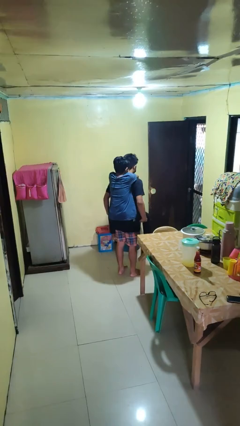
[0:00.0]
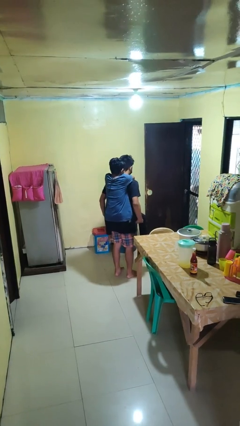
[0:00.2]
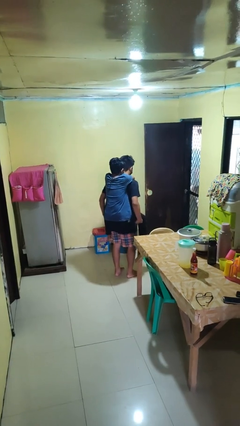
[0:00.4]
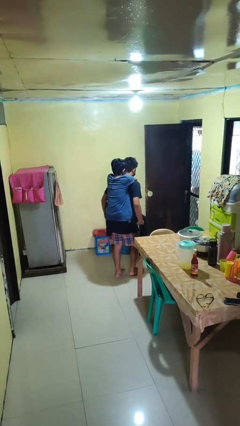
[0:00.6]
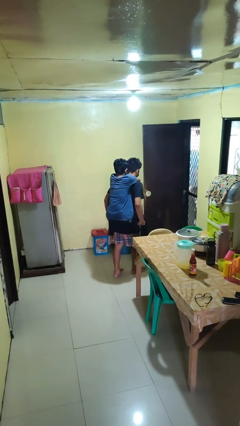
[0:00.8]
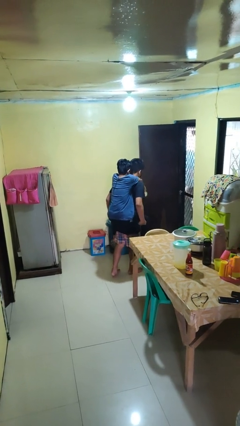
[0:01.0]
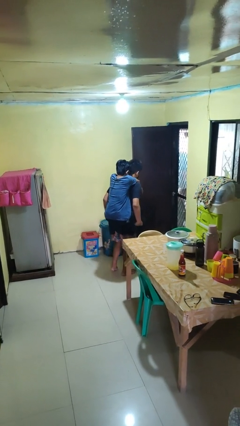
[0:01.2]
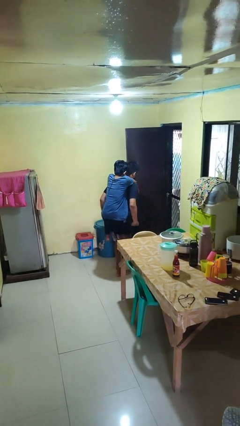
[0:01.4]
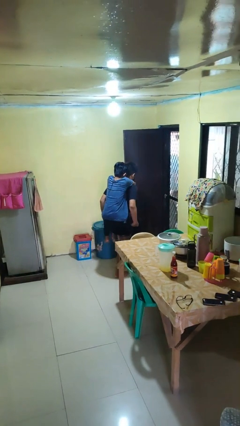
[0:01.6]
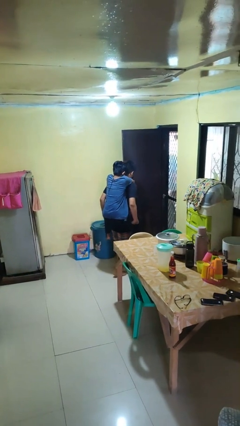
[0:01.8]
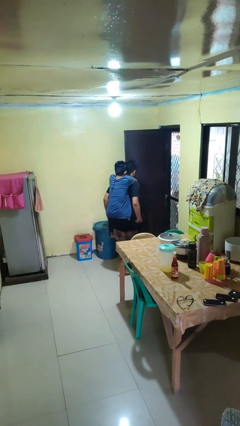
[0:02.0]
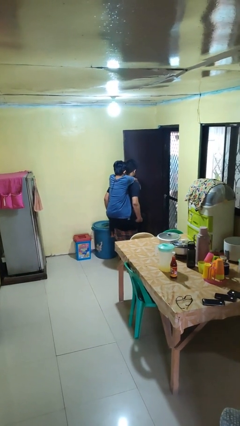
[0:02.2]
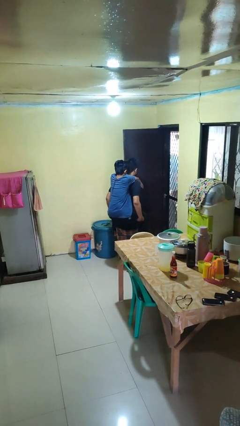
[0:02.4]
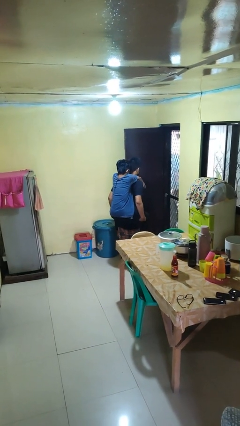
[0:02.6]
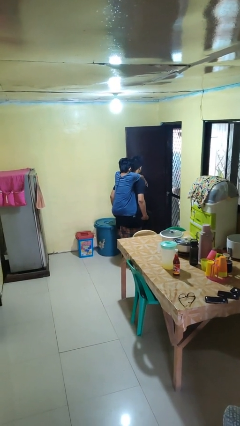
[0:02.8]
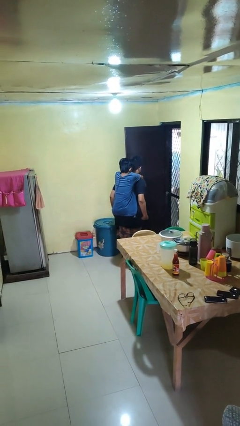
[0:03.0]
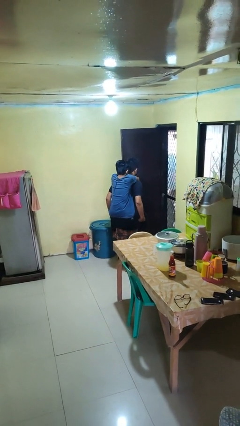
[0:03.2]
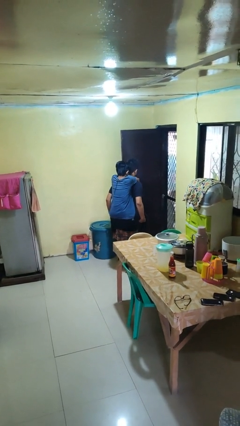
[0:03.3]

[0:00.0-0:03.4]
person carries person on back

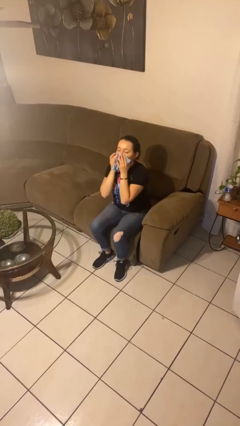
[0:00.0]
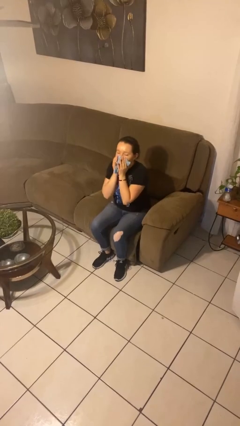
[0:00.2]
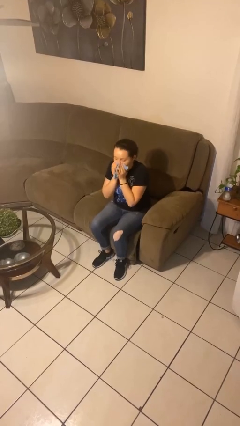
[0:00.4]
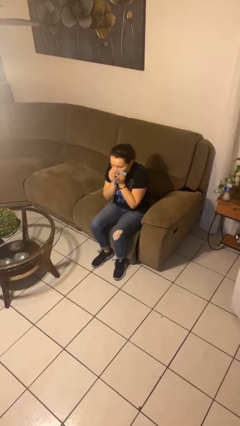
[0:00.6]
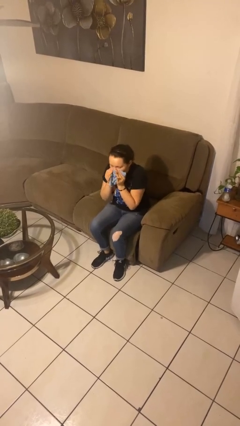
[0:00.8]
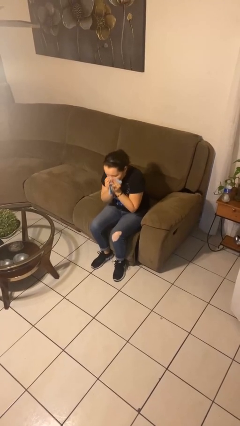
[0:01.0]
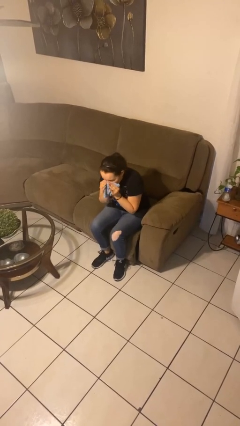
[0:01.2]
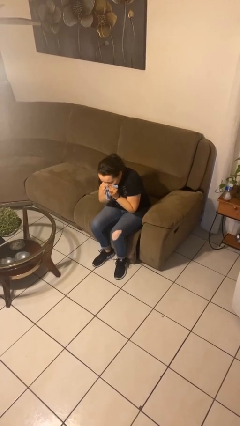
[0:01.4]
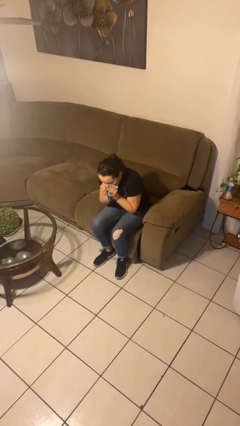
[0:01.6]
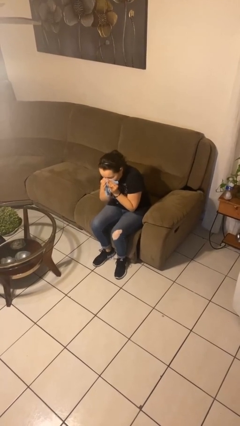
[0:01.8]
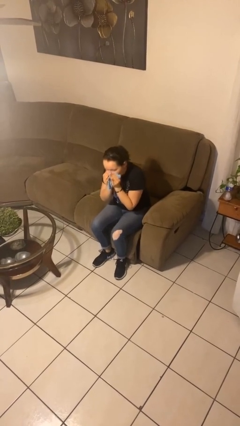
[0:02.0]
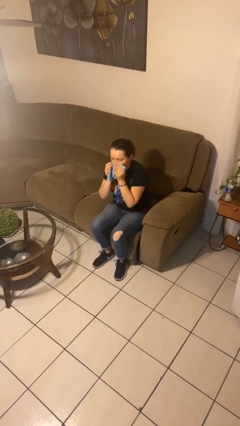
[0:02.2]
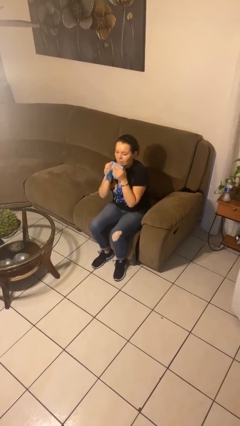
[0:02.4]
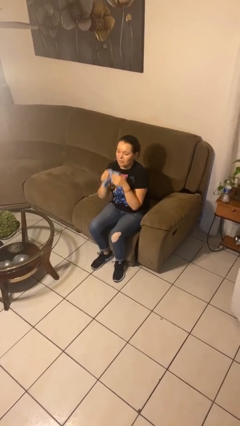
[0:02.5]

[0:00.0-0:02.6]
person blows nose

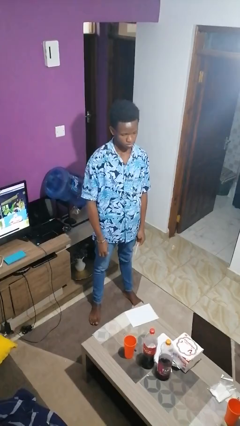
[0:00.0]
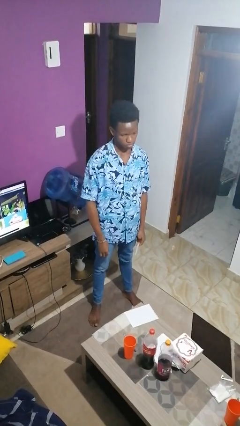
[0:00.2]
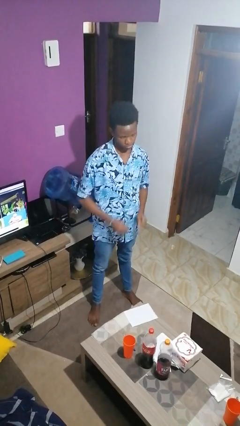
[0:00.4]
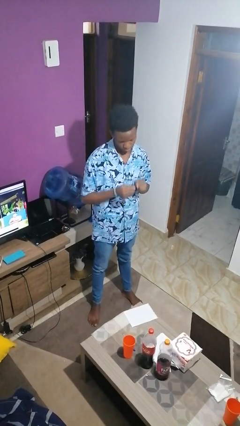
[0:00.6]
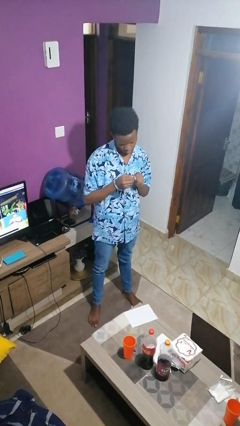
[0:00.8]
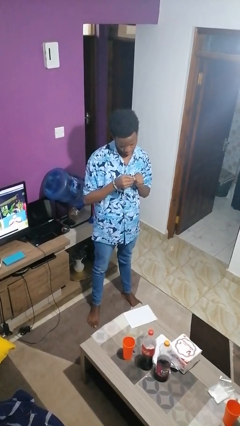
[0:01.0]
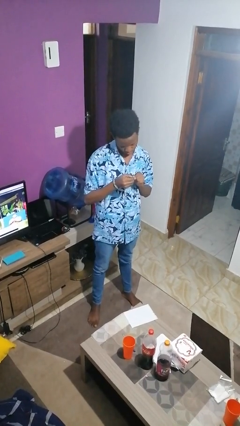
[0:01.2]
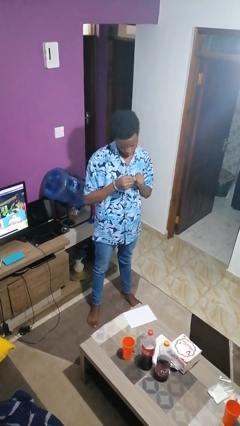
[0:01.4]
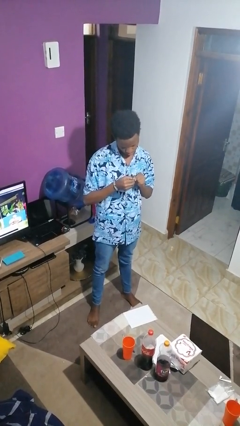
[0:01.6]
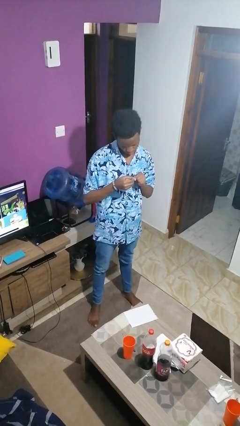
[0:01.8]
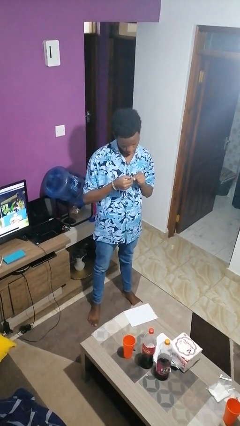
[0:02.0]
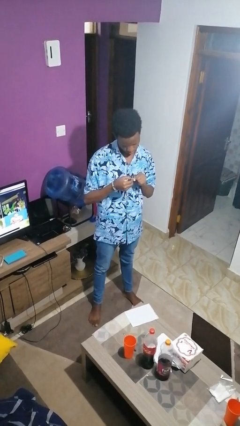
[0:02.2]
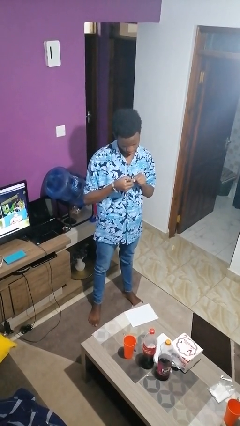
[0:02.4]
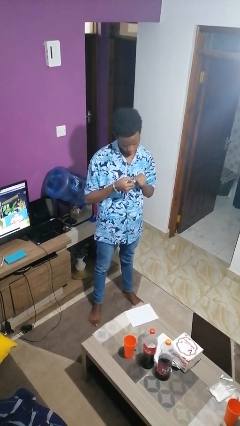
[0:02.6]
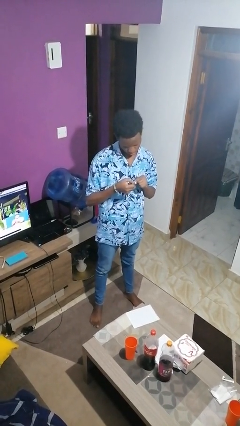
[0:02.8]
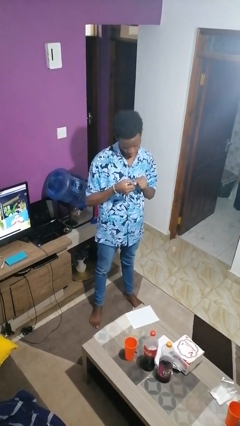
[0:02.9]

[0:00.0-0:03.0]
person files fingernails

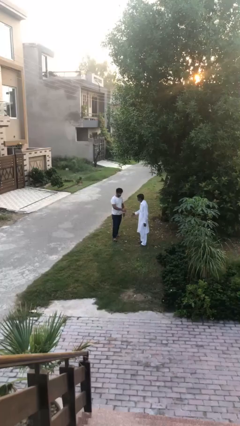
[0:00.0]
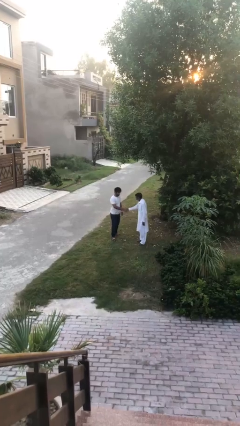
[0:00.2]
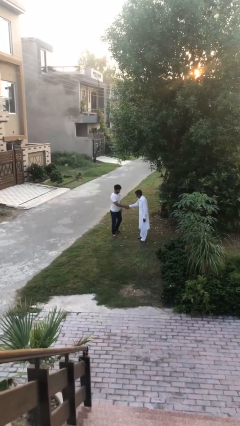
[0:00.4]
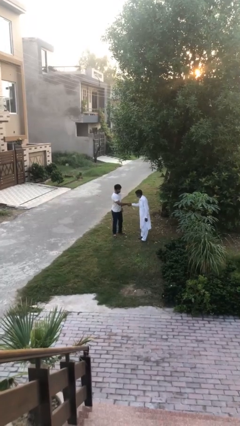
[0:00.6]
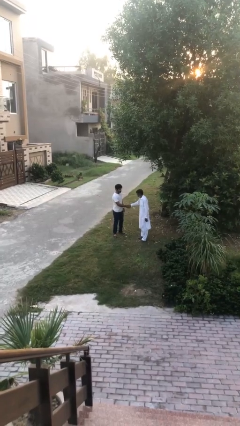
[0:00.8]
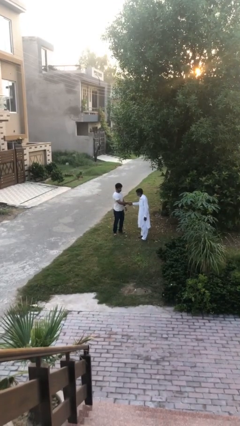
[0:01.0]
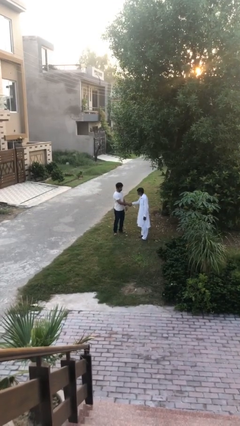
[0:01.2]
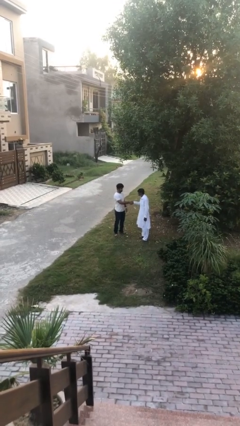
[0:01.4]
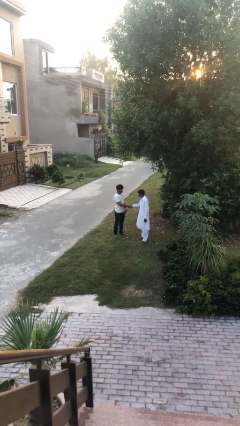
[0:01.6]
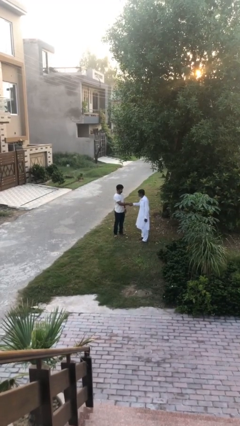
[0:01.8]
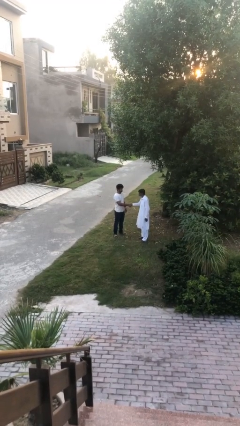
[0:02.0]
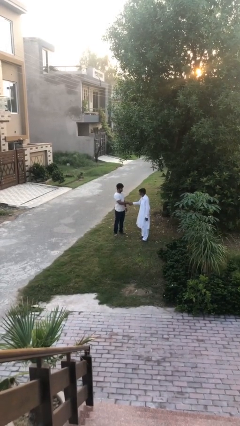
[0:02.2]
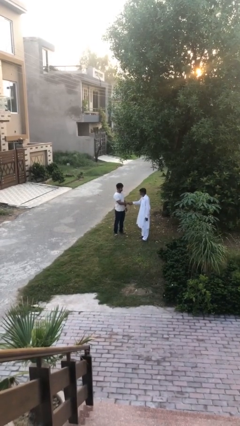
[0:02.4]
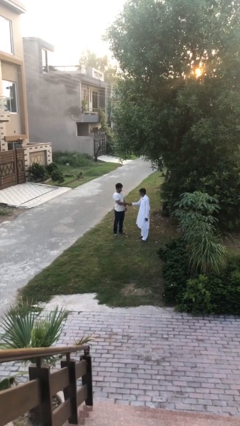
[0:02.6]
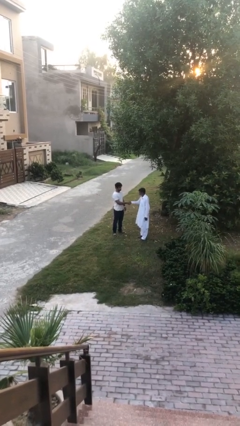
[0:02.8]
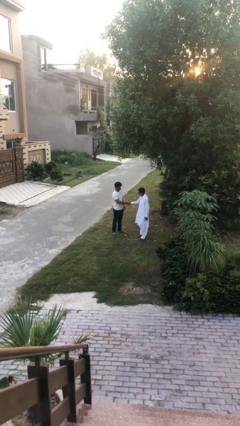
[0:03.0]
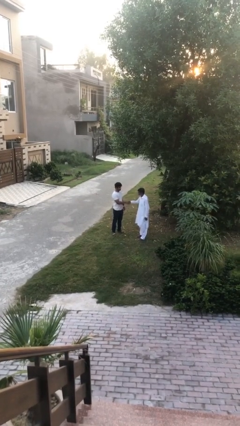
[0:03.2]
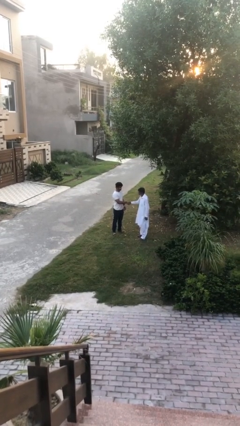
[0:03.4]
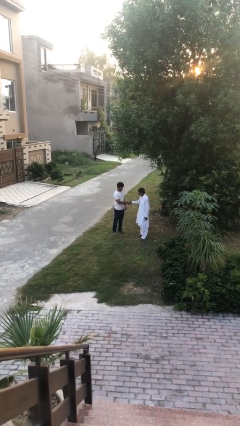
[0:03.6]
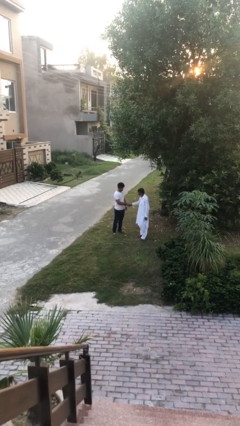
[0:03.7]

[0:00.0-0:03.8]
person shakes hand

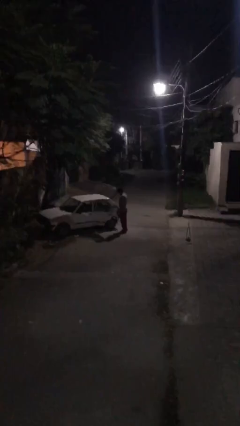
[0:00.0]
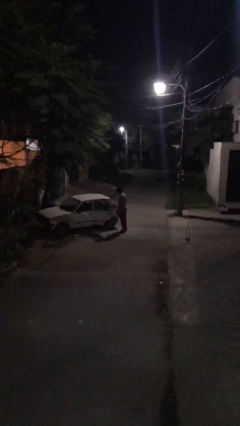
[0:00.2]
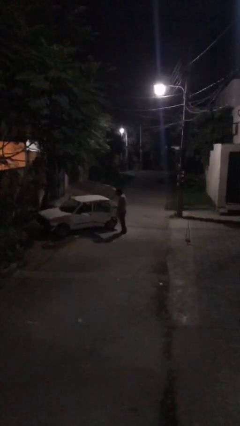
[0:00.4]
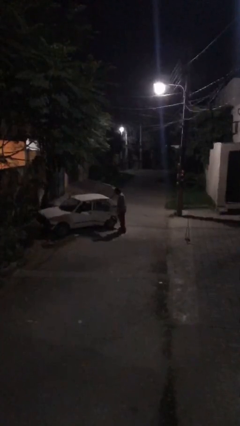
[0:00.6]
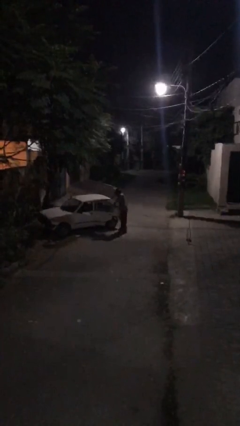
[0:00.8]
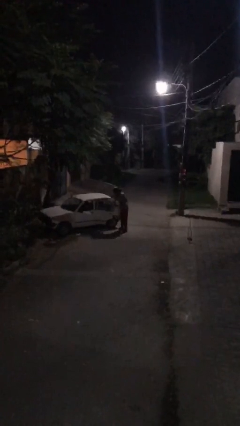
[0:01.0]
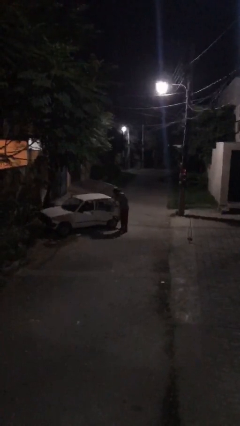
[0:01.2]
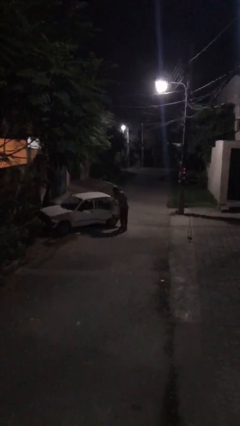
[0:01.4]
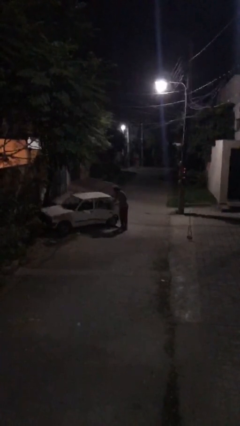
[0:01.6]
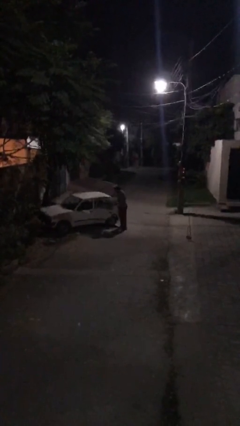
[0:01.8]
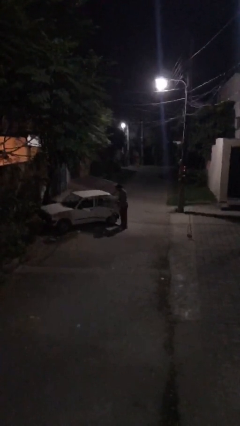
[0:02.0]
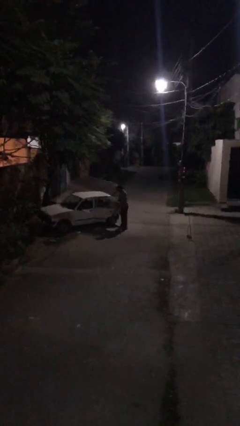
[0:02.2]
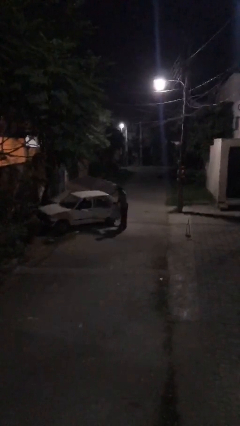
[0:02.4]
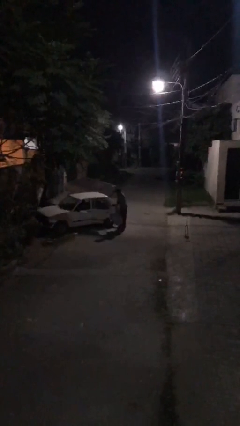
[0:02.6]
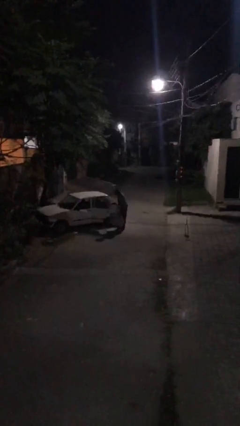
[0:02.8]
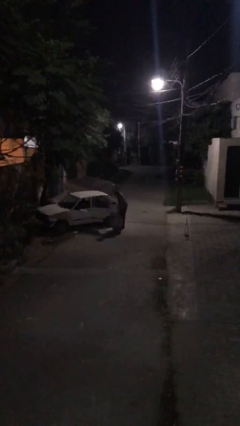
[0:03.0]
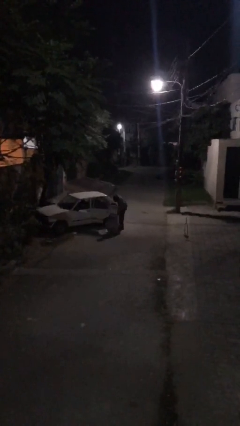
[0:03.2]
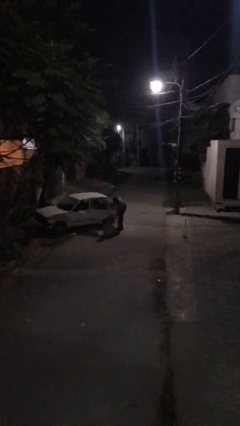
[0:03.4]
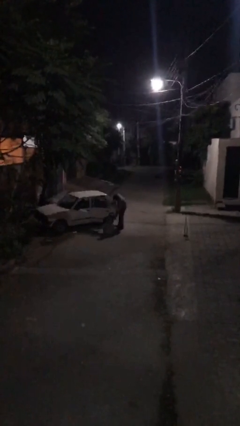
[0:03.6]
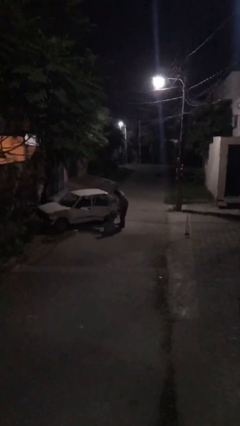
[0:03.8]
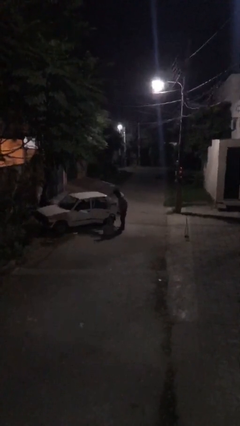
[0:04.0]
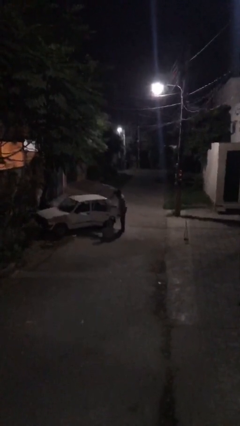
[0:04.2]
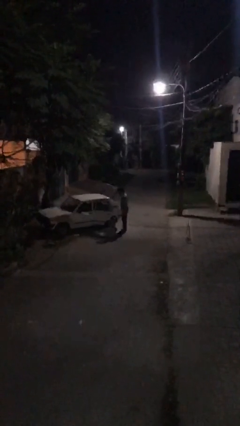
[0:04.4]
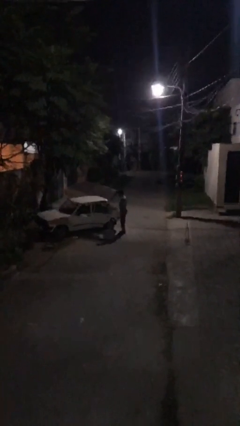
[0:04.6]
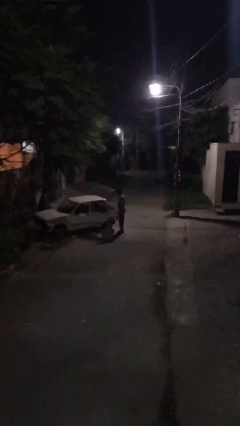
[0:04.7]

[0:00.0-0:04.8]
person unloads car
